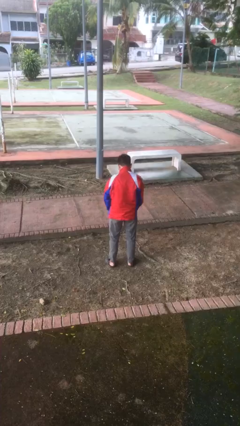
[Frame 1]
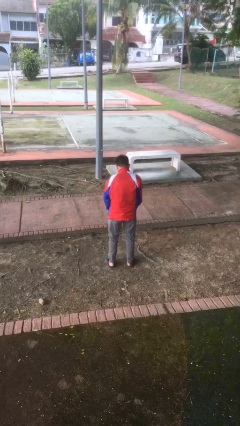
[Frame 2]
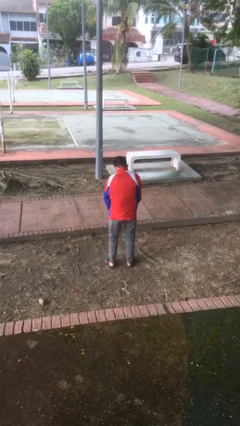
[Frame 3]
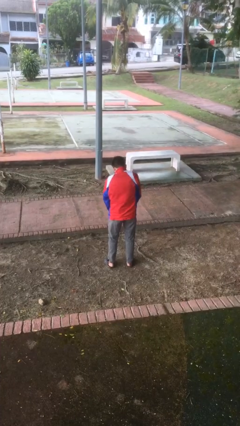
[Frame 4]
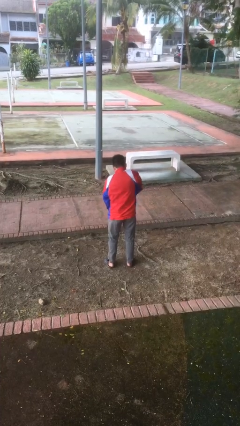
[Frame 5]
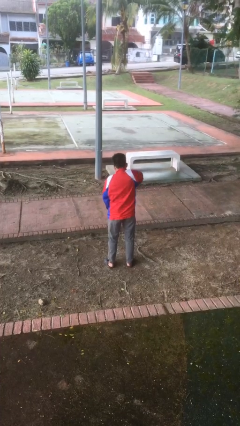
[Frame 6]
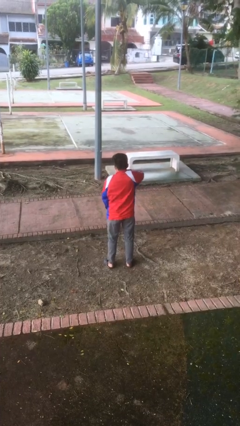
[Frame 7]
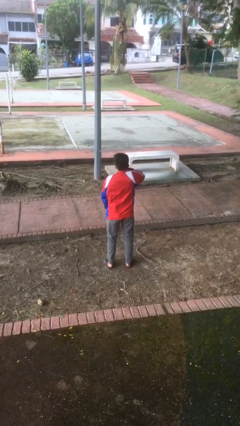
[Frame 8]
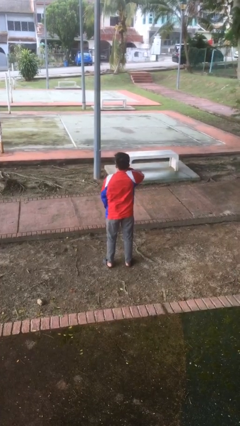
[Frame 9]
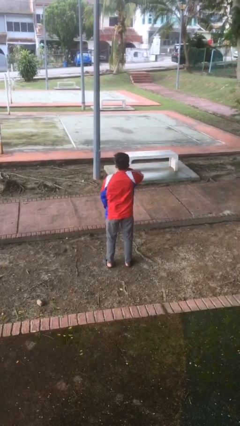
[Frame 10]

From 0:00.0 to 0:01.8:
person zips up jacket

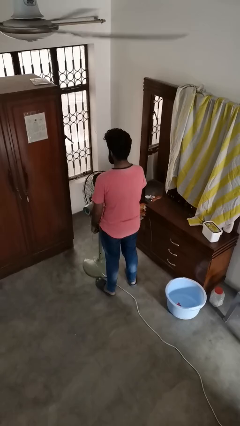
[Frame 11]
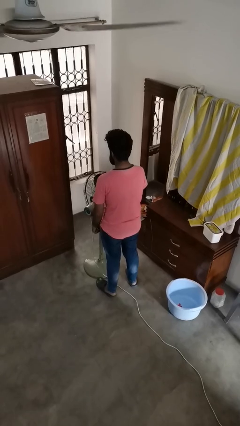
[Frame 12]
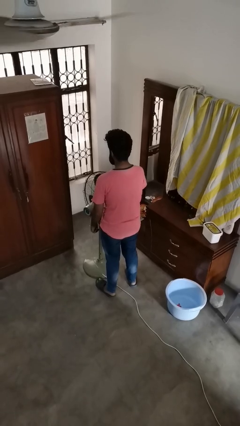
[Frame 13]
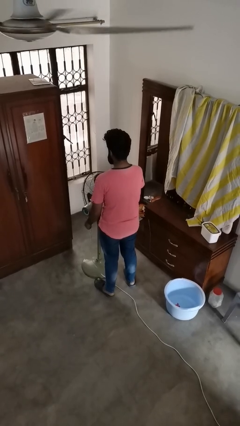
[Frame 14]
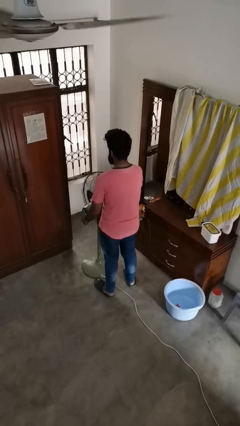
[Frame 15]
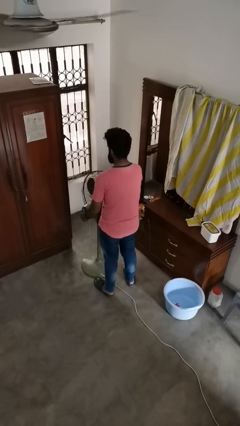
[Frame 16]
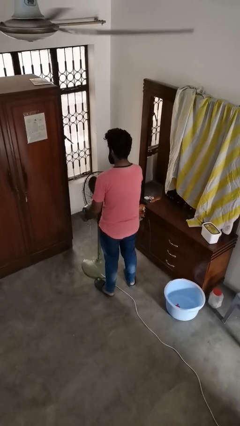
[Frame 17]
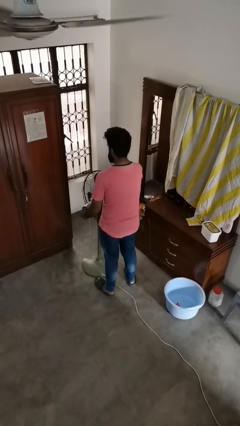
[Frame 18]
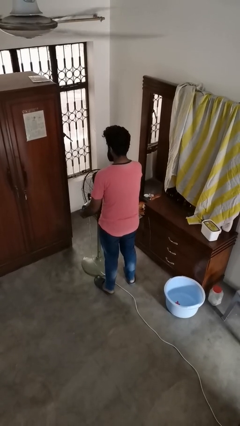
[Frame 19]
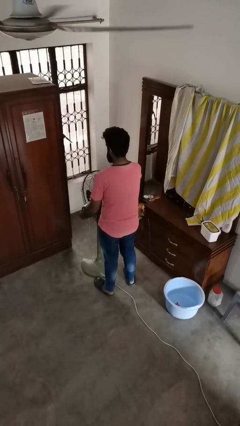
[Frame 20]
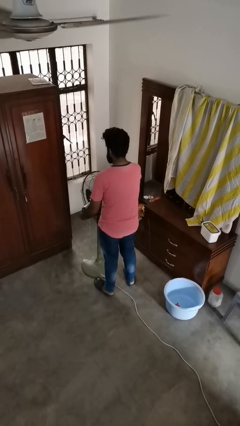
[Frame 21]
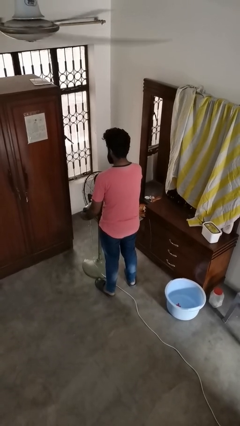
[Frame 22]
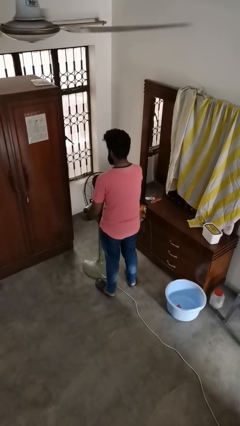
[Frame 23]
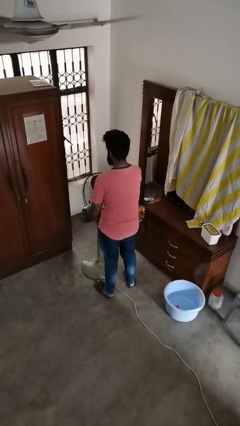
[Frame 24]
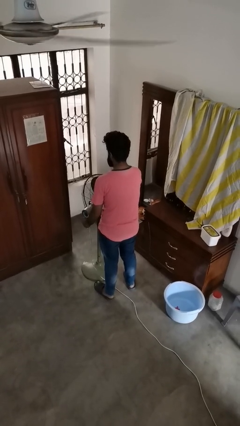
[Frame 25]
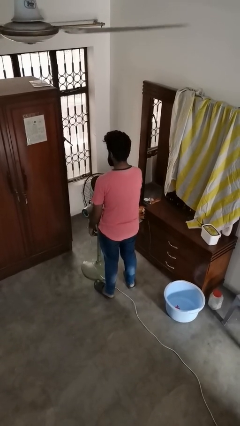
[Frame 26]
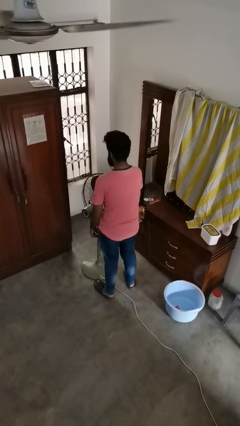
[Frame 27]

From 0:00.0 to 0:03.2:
person turns off fan

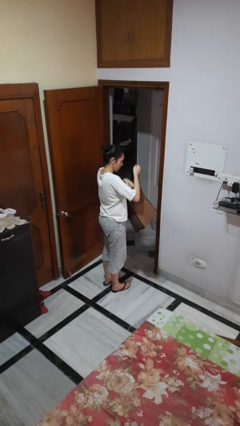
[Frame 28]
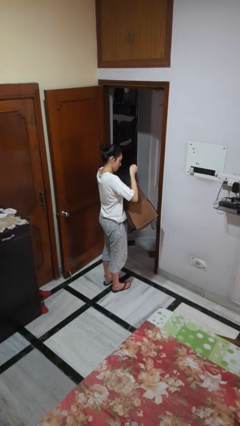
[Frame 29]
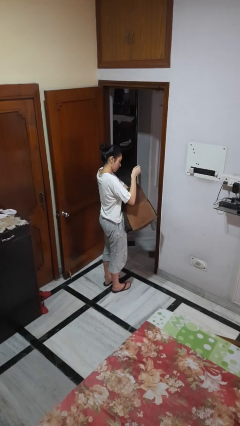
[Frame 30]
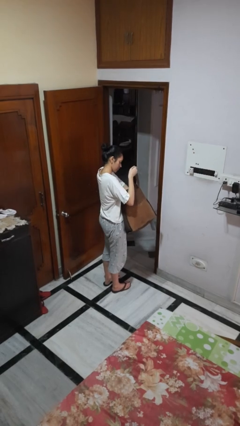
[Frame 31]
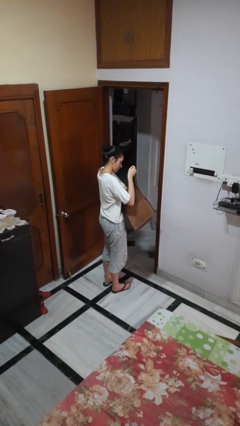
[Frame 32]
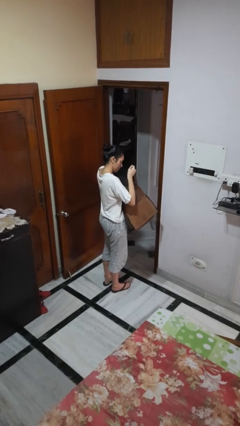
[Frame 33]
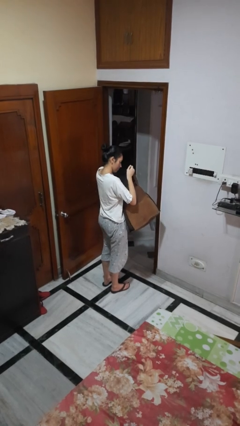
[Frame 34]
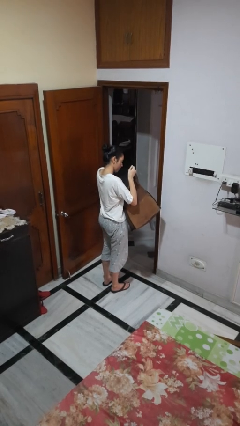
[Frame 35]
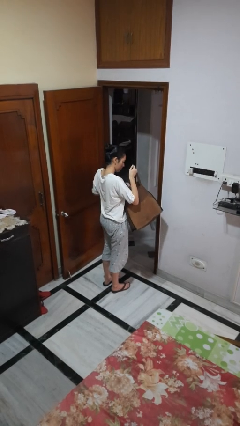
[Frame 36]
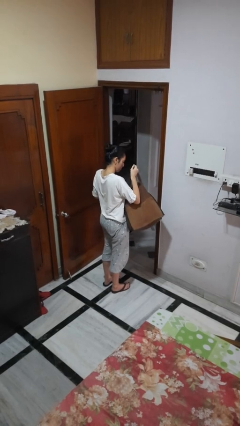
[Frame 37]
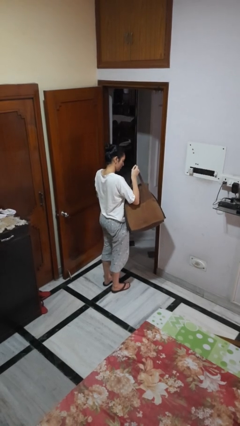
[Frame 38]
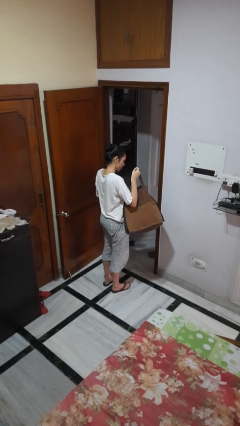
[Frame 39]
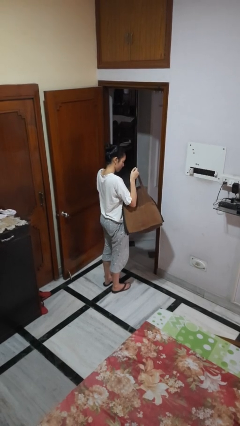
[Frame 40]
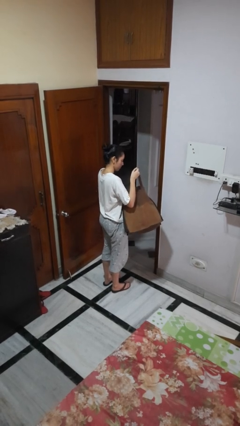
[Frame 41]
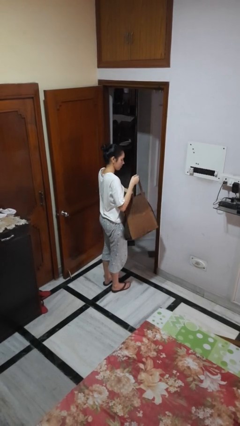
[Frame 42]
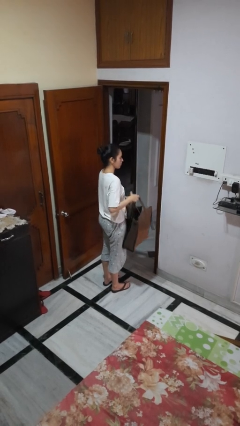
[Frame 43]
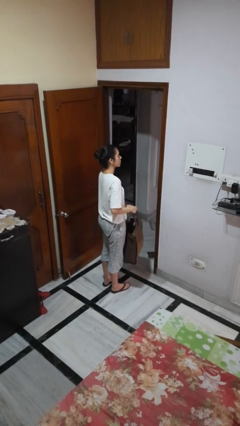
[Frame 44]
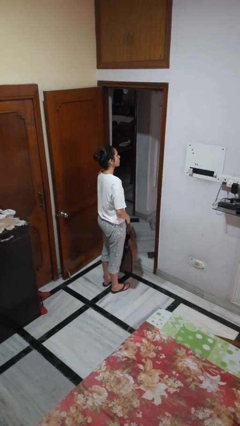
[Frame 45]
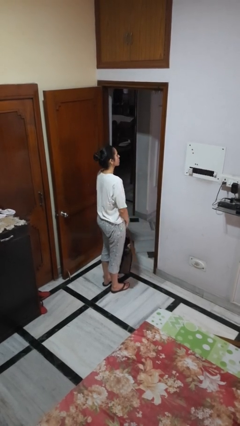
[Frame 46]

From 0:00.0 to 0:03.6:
person searches in bag

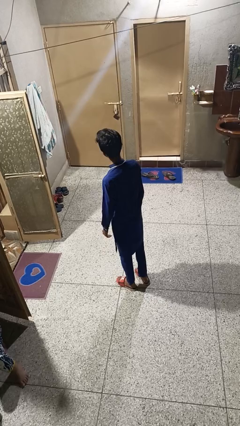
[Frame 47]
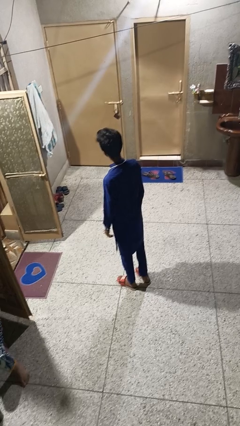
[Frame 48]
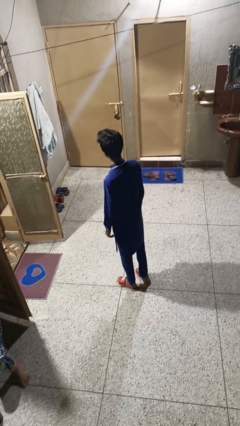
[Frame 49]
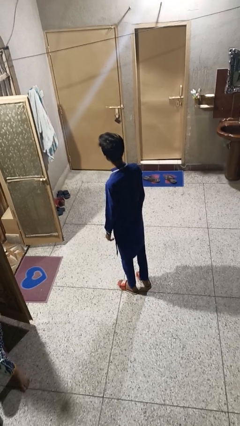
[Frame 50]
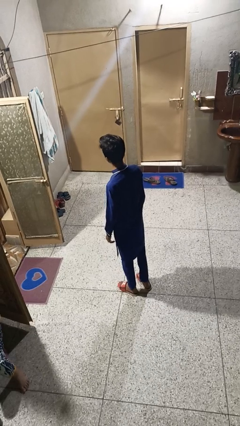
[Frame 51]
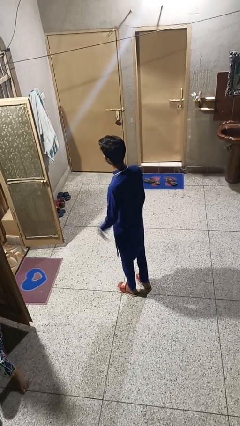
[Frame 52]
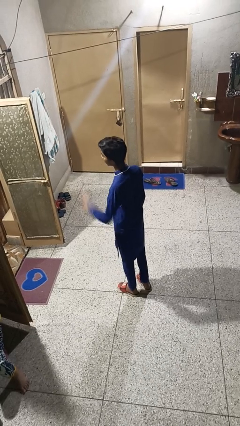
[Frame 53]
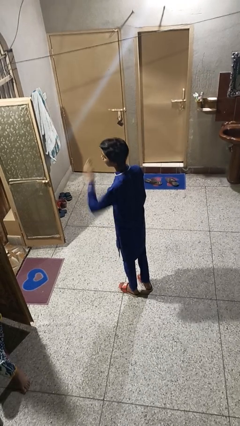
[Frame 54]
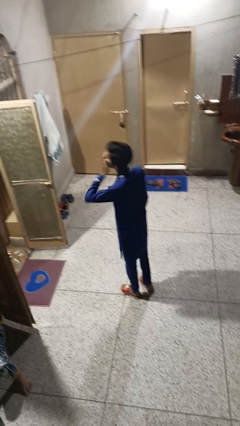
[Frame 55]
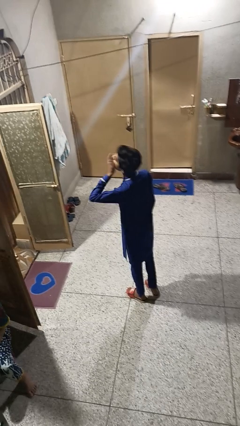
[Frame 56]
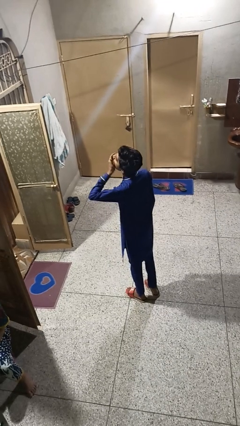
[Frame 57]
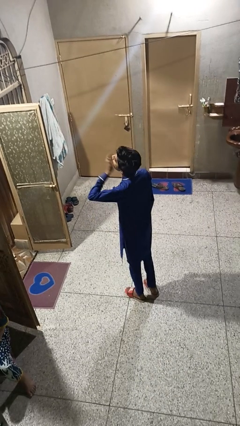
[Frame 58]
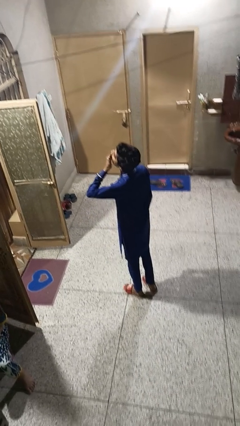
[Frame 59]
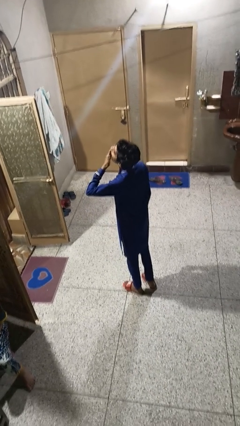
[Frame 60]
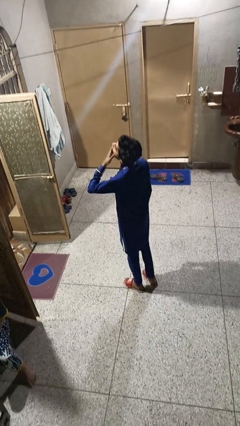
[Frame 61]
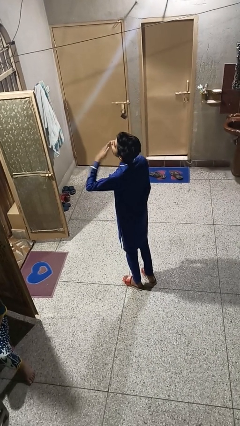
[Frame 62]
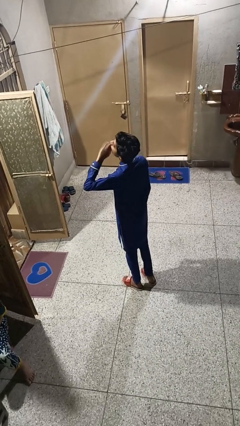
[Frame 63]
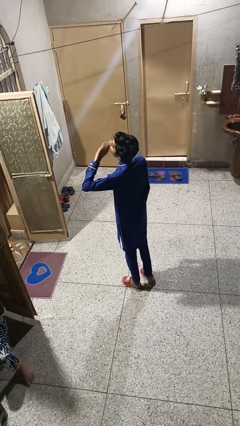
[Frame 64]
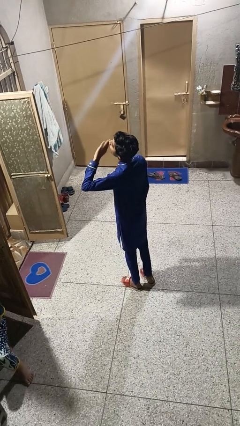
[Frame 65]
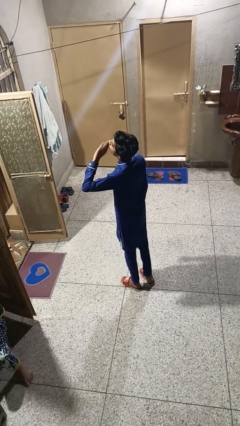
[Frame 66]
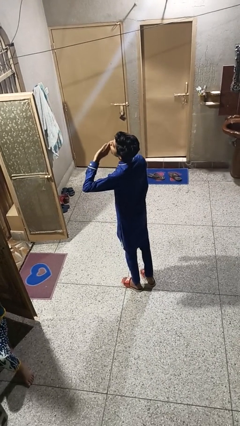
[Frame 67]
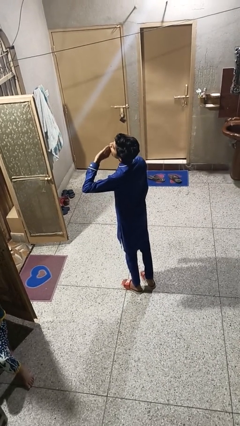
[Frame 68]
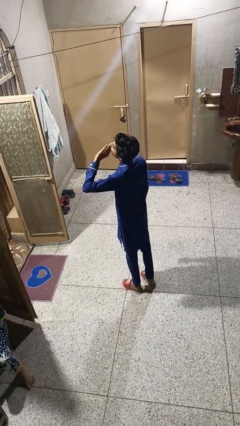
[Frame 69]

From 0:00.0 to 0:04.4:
person yawns

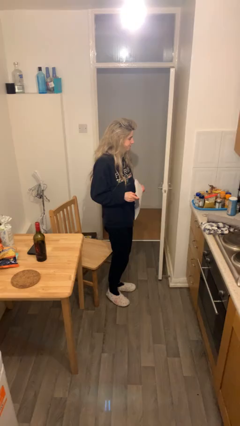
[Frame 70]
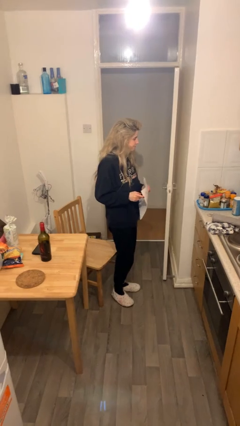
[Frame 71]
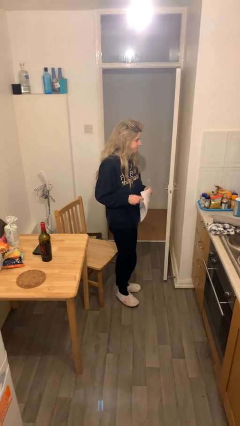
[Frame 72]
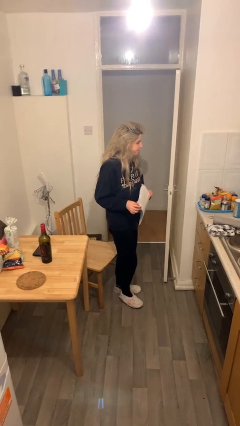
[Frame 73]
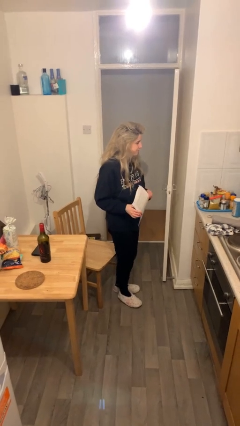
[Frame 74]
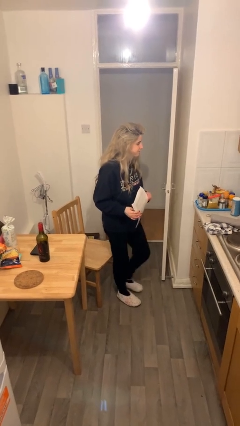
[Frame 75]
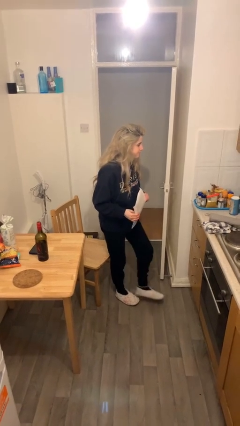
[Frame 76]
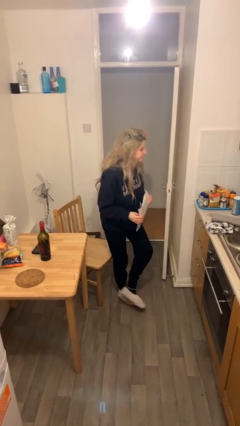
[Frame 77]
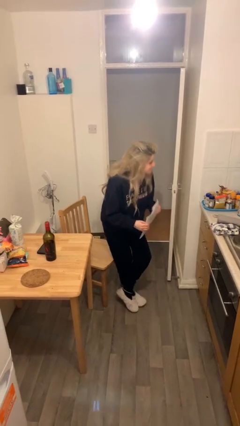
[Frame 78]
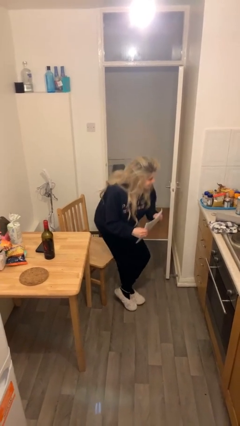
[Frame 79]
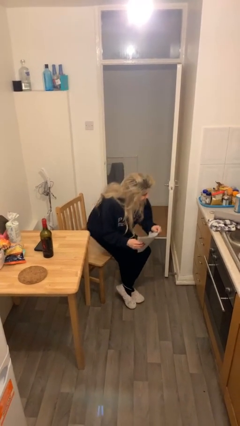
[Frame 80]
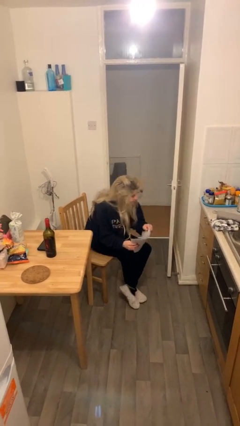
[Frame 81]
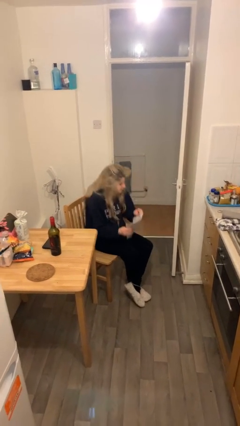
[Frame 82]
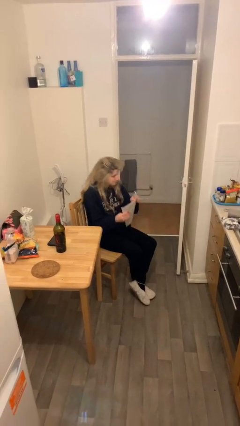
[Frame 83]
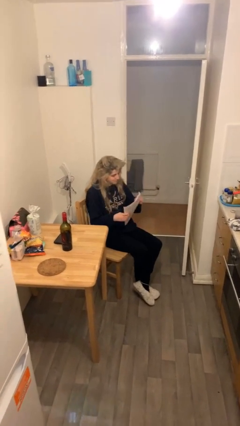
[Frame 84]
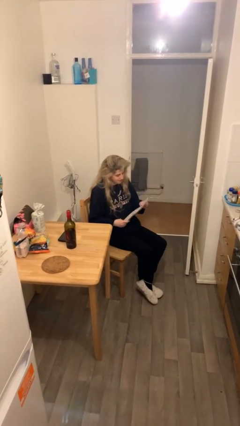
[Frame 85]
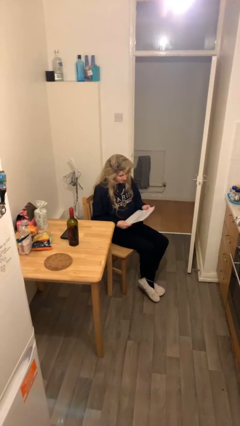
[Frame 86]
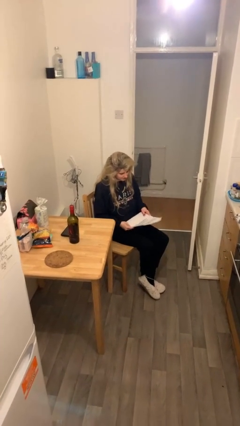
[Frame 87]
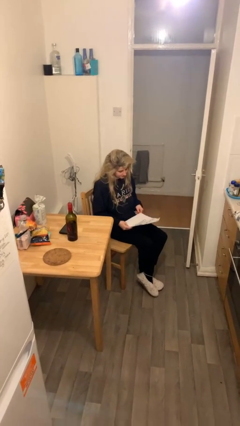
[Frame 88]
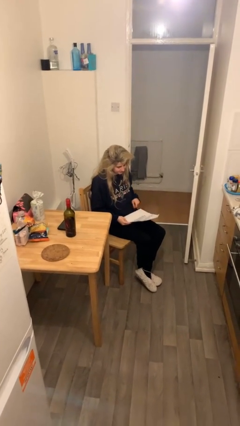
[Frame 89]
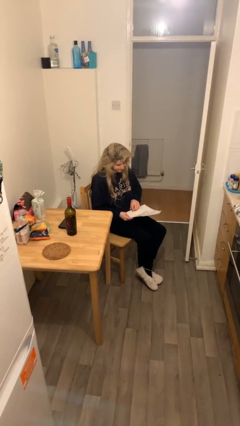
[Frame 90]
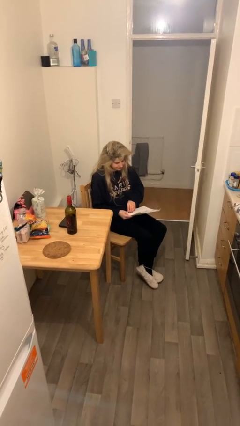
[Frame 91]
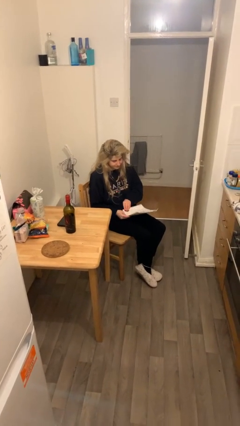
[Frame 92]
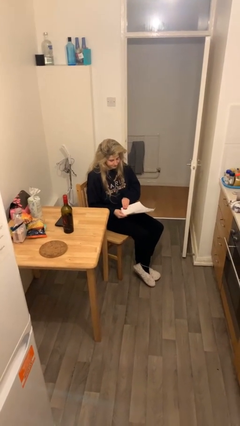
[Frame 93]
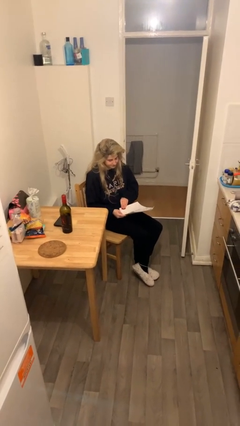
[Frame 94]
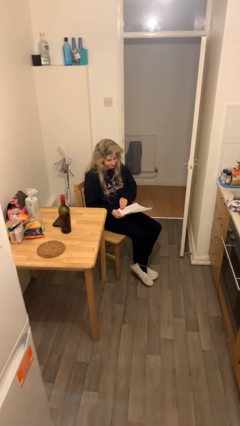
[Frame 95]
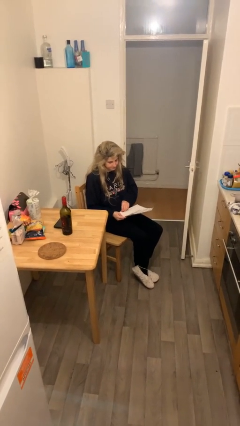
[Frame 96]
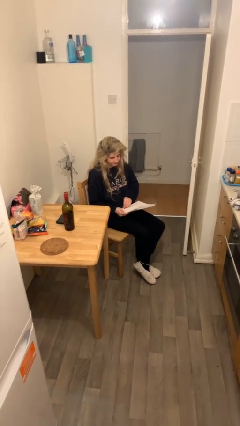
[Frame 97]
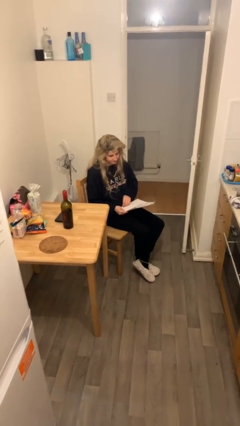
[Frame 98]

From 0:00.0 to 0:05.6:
person sits down
